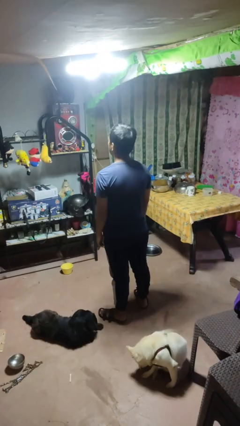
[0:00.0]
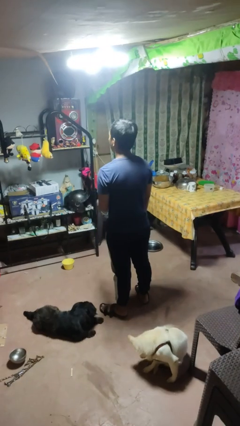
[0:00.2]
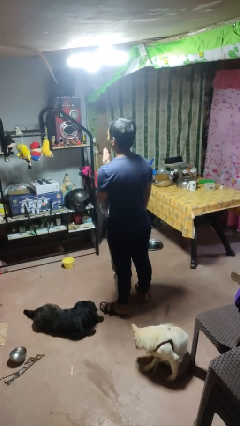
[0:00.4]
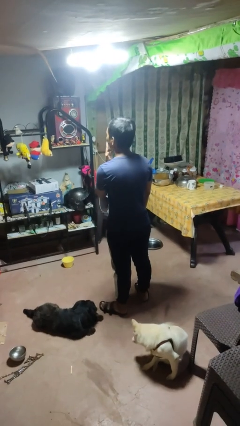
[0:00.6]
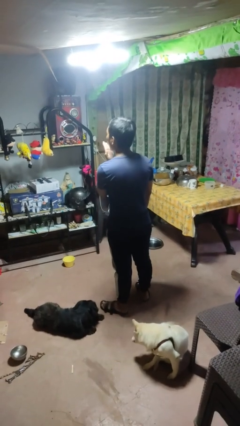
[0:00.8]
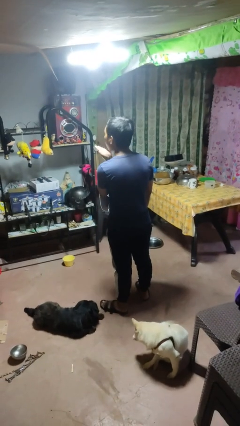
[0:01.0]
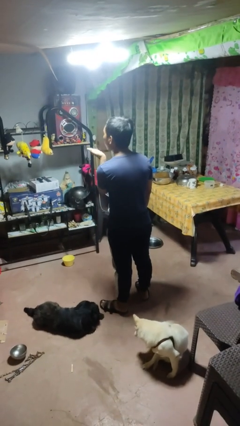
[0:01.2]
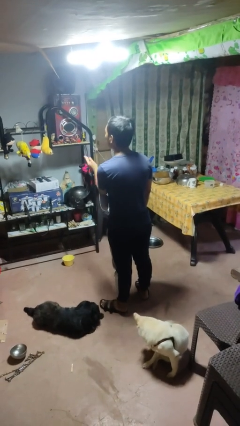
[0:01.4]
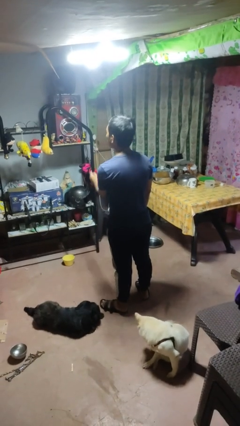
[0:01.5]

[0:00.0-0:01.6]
person gestures blow kiss

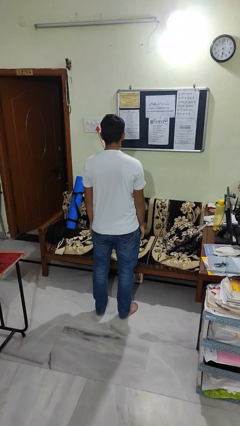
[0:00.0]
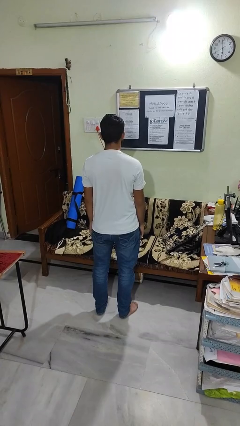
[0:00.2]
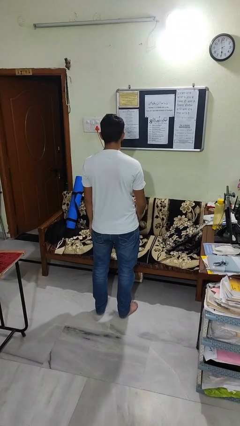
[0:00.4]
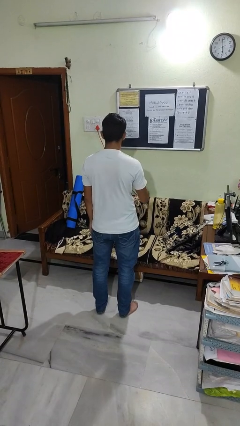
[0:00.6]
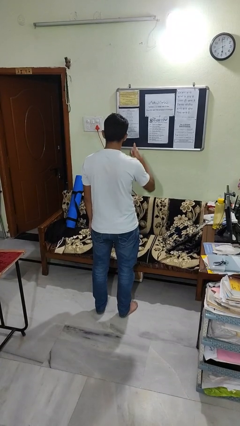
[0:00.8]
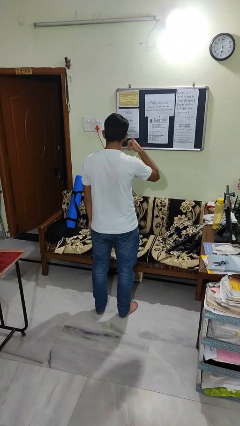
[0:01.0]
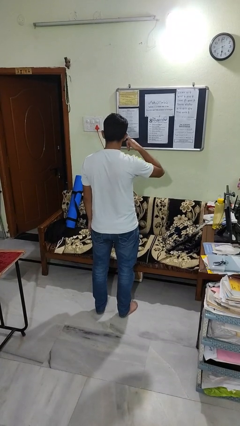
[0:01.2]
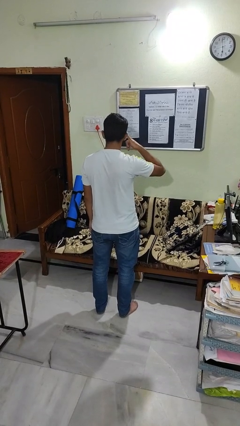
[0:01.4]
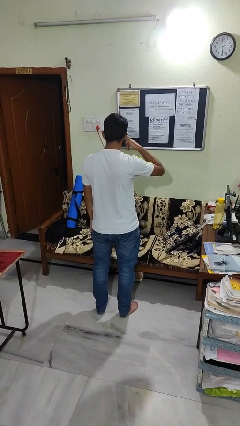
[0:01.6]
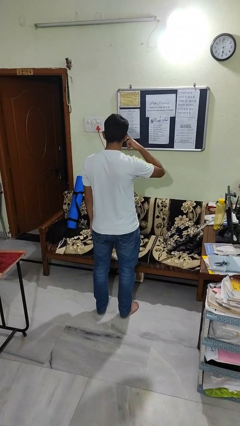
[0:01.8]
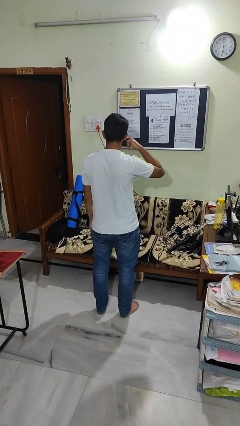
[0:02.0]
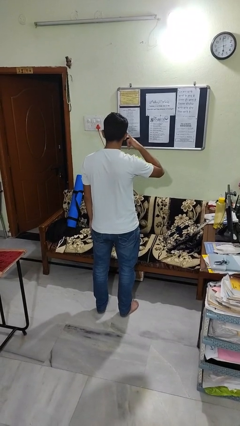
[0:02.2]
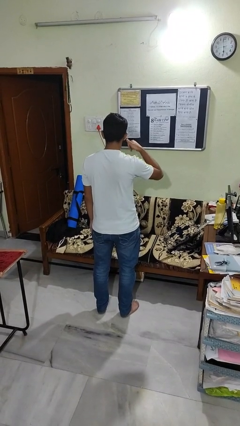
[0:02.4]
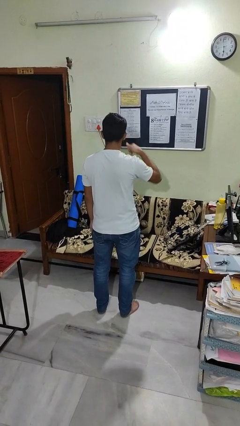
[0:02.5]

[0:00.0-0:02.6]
person gestures call me

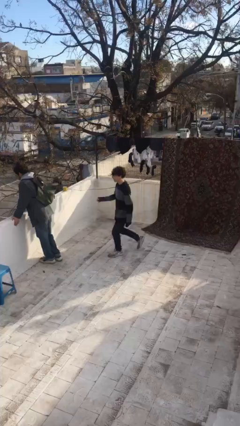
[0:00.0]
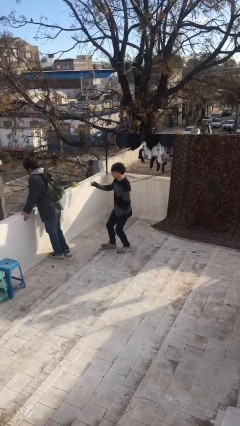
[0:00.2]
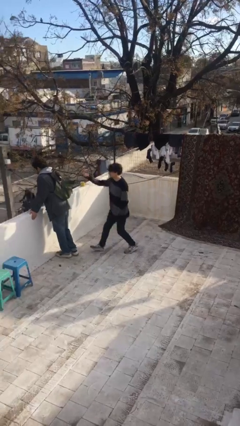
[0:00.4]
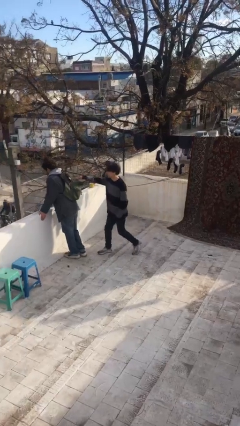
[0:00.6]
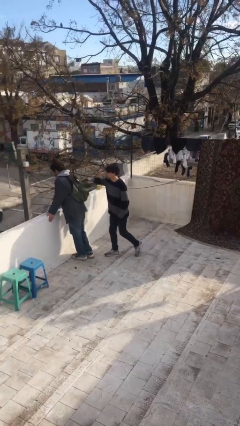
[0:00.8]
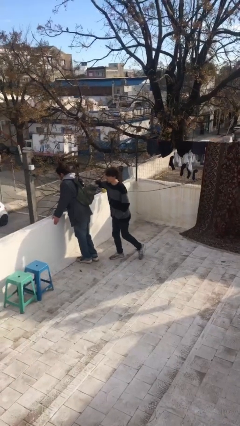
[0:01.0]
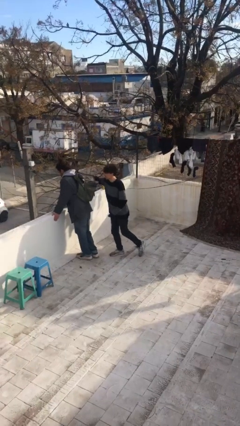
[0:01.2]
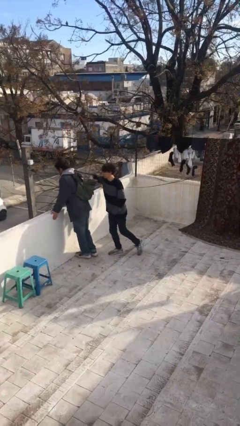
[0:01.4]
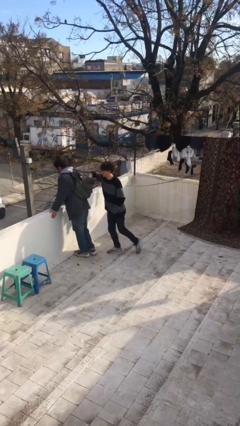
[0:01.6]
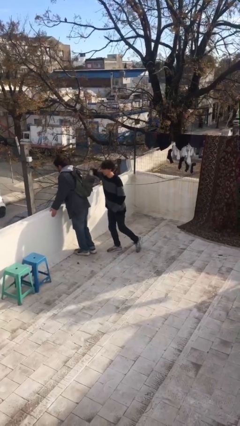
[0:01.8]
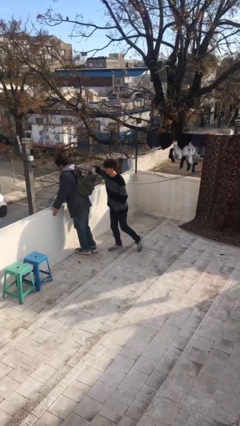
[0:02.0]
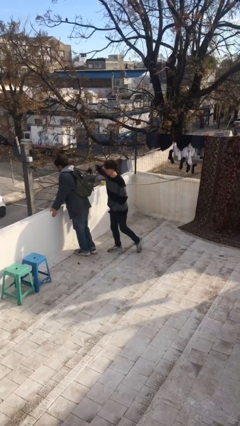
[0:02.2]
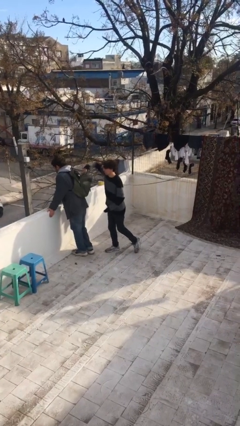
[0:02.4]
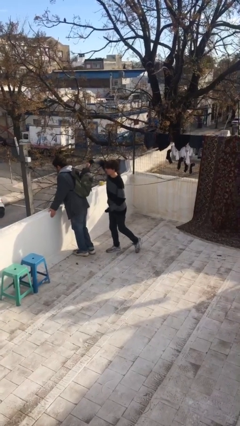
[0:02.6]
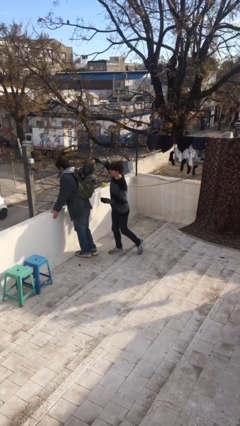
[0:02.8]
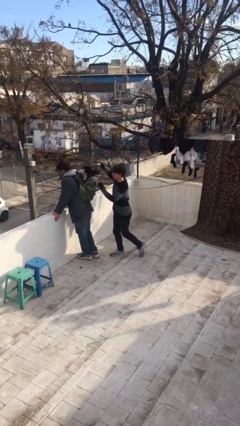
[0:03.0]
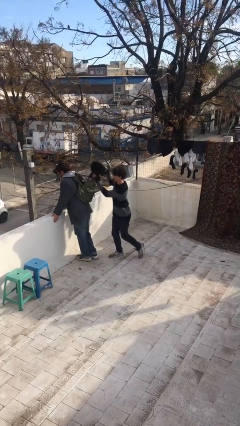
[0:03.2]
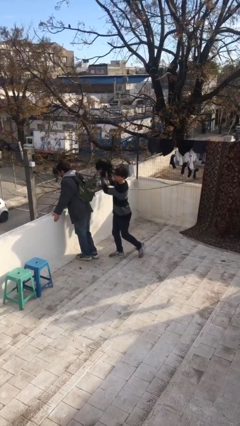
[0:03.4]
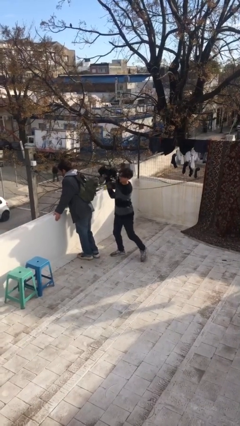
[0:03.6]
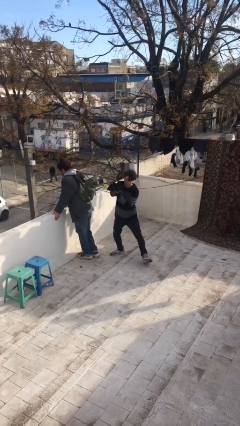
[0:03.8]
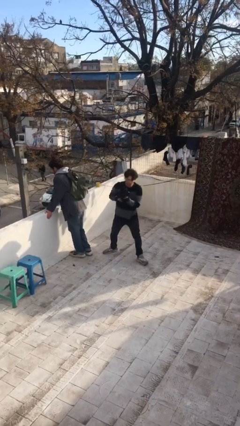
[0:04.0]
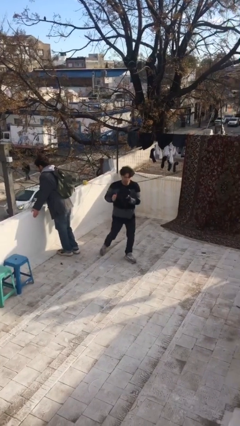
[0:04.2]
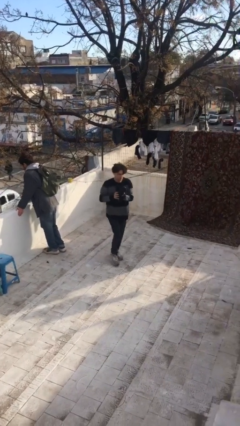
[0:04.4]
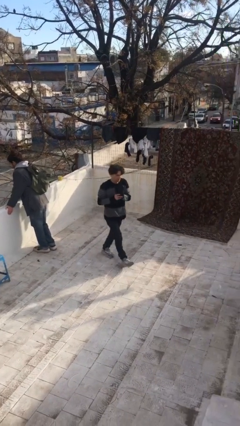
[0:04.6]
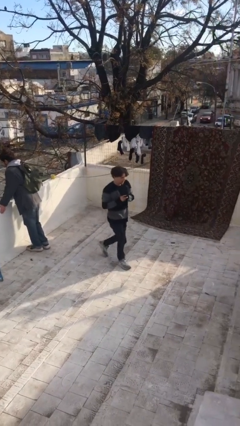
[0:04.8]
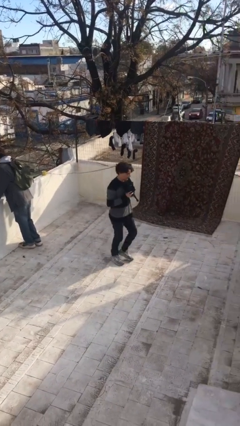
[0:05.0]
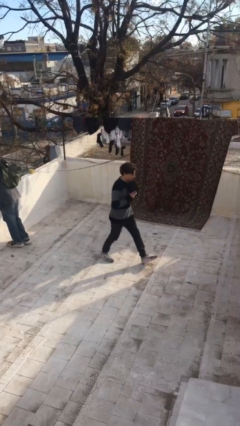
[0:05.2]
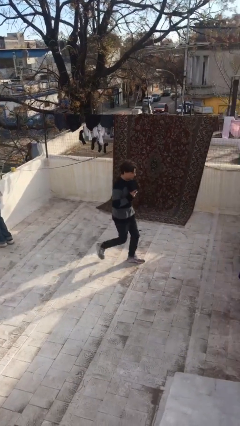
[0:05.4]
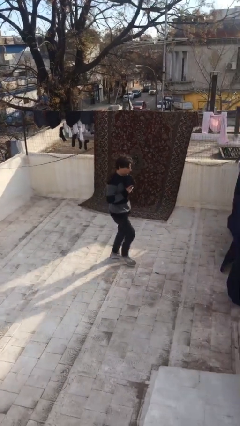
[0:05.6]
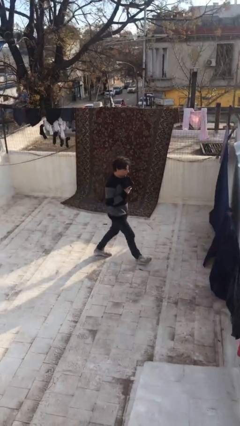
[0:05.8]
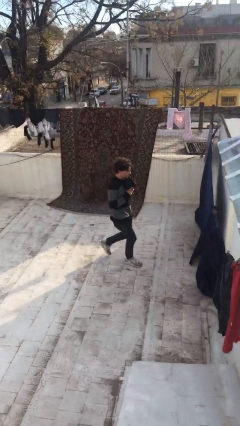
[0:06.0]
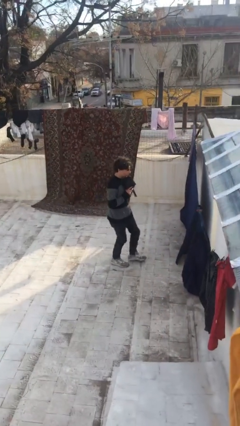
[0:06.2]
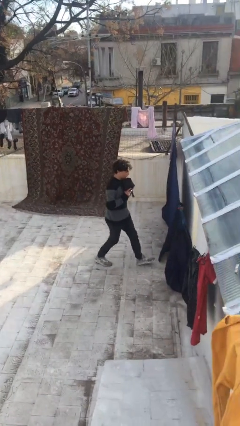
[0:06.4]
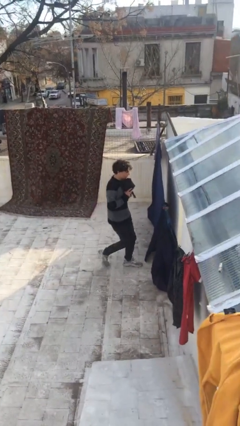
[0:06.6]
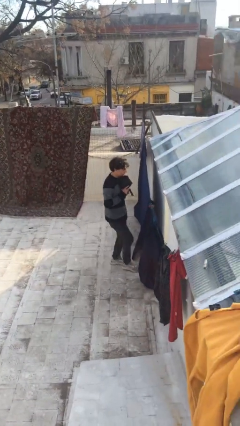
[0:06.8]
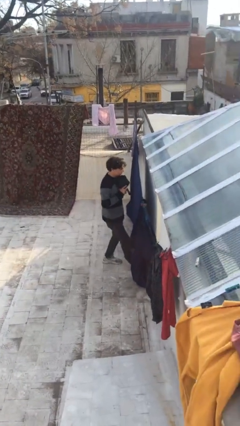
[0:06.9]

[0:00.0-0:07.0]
person steals object from person

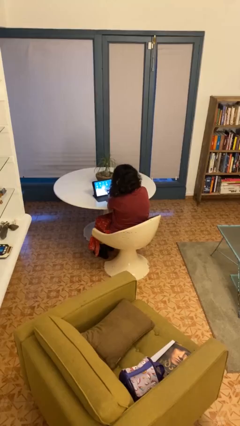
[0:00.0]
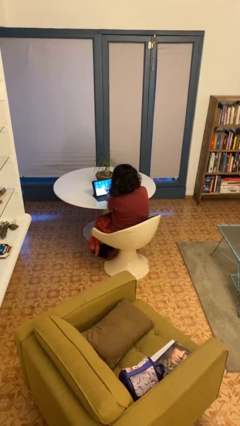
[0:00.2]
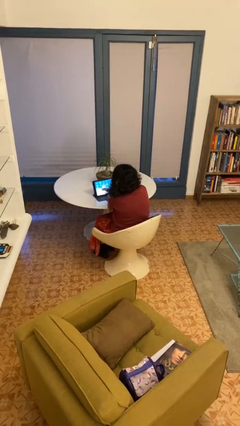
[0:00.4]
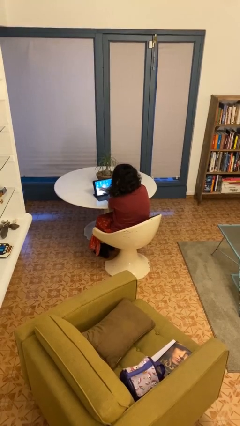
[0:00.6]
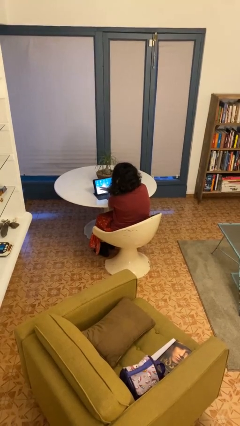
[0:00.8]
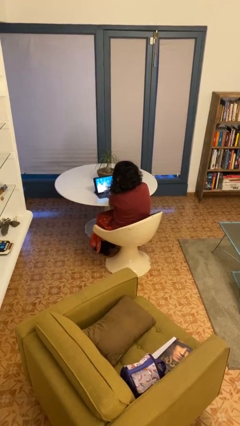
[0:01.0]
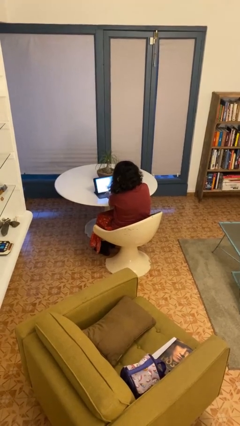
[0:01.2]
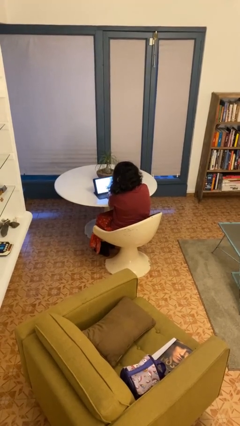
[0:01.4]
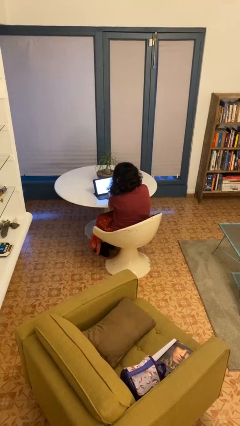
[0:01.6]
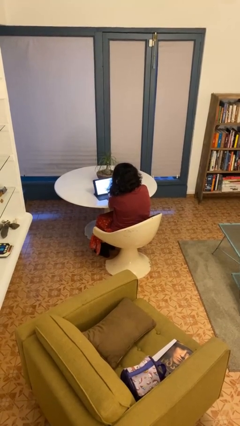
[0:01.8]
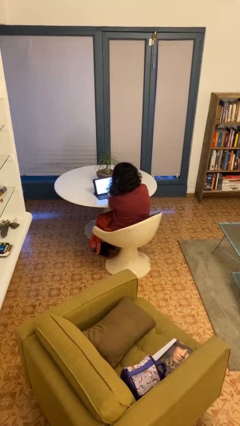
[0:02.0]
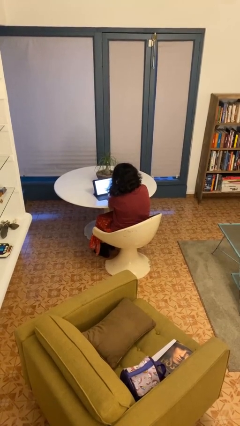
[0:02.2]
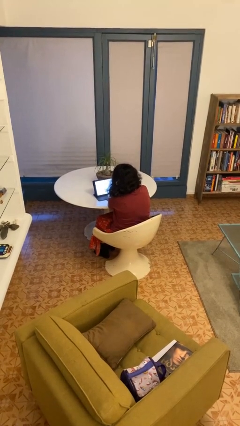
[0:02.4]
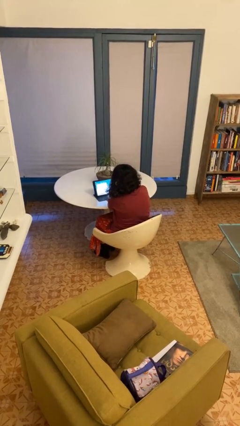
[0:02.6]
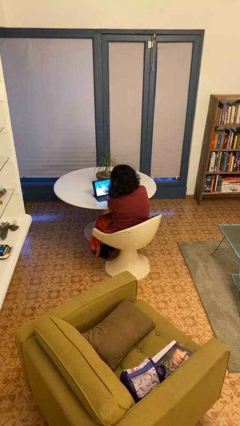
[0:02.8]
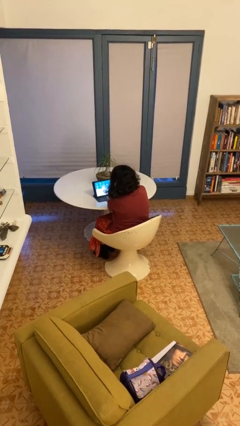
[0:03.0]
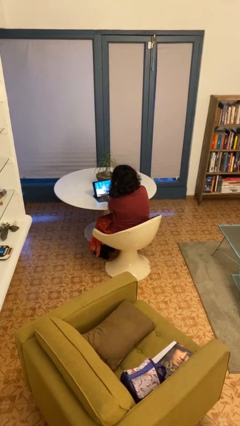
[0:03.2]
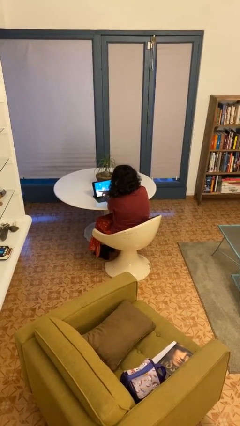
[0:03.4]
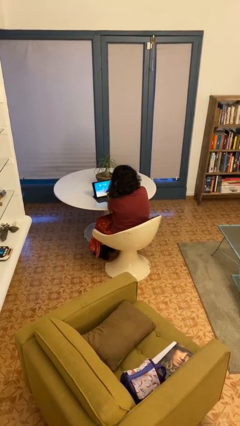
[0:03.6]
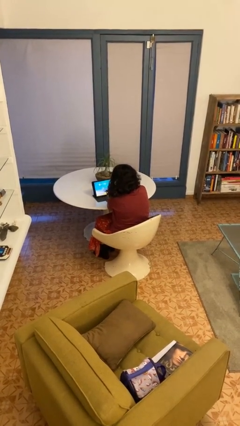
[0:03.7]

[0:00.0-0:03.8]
person interacts with tablet

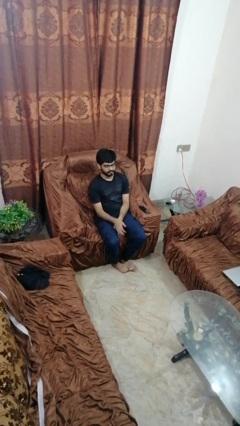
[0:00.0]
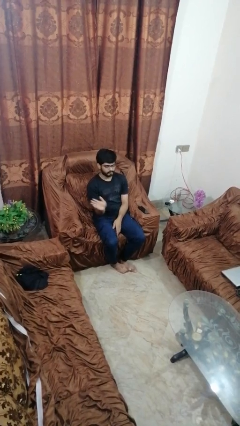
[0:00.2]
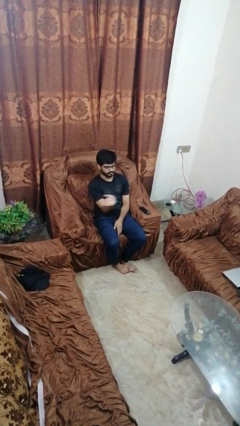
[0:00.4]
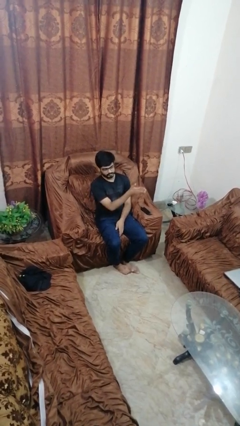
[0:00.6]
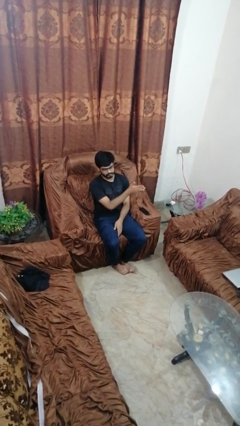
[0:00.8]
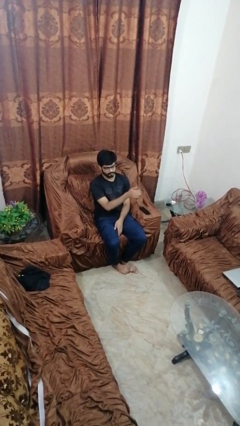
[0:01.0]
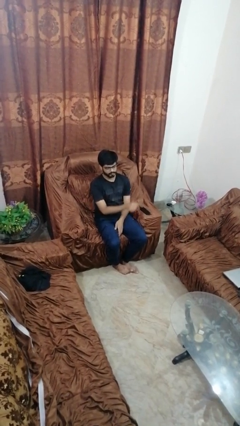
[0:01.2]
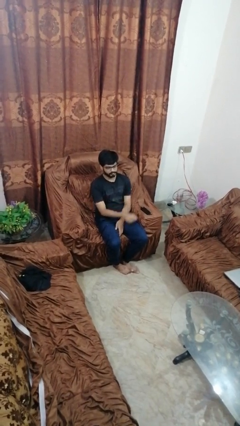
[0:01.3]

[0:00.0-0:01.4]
person gestures swipe left

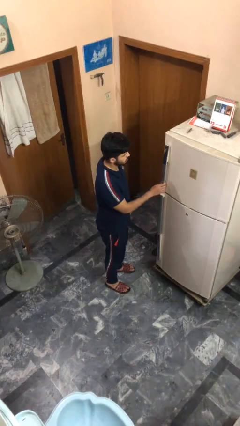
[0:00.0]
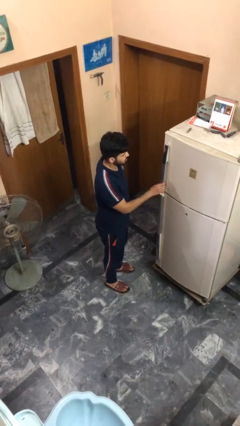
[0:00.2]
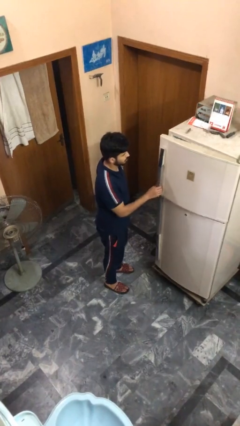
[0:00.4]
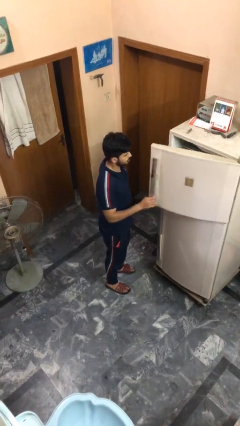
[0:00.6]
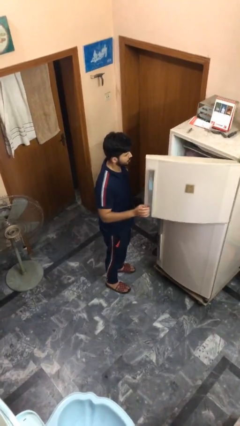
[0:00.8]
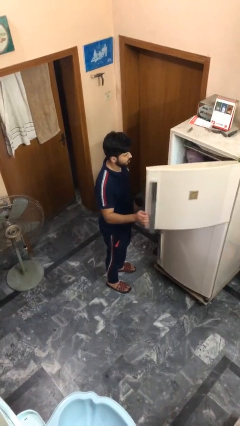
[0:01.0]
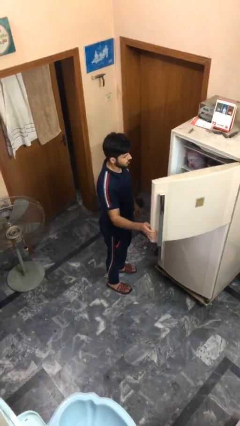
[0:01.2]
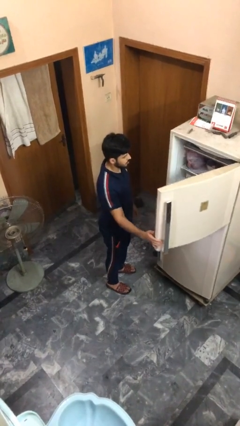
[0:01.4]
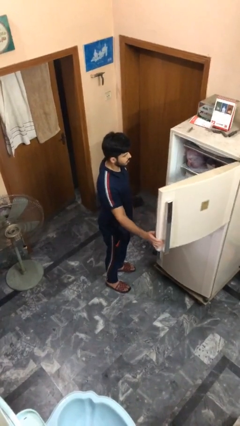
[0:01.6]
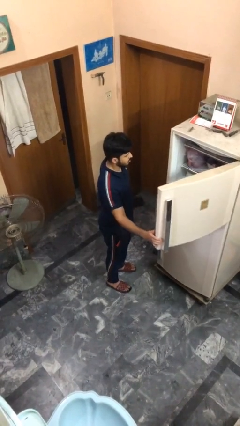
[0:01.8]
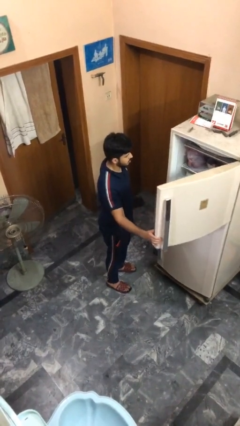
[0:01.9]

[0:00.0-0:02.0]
person opens refrigerator
